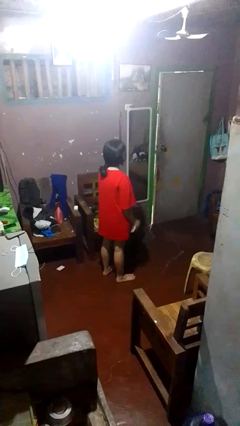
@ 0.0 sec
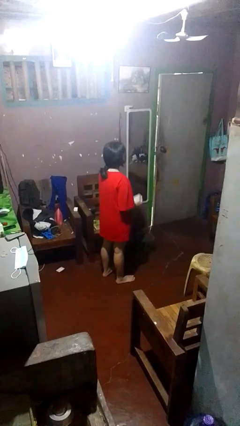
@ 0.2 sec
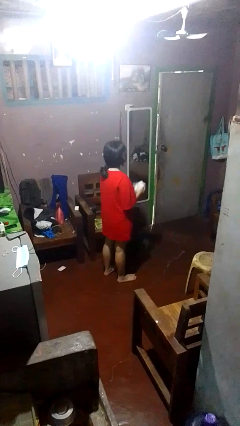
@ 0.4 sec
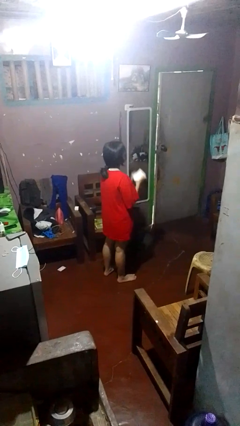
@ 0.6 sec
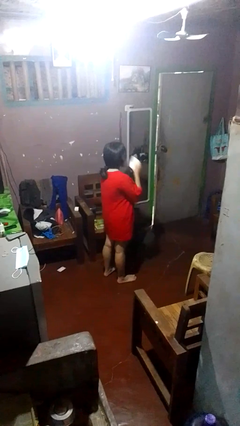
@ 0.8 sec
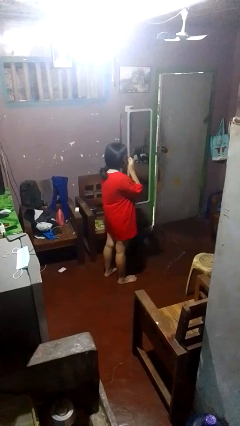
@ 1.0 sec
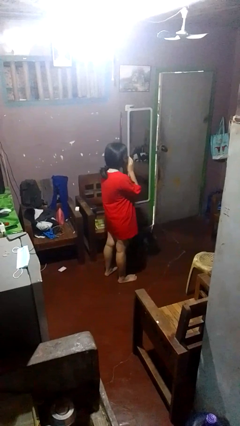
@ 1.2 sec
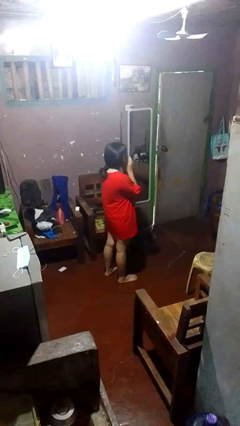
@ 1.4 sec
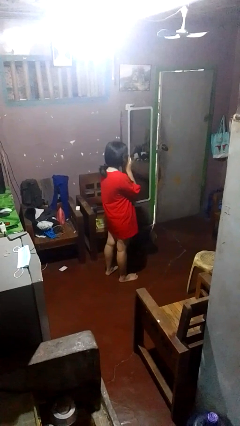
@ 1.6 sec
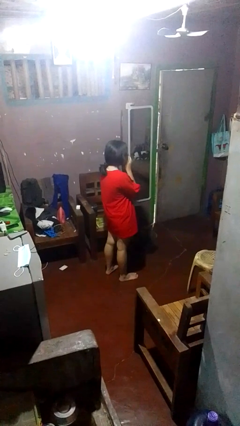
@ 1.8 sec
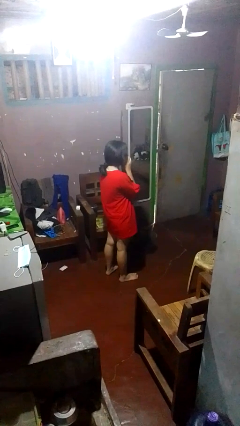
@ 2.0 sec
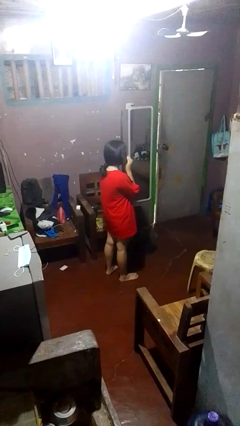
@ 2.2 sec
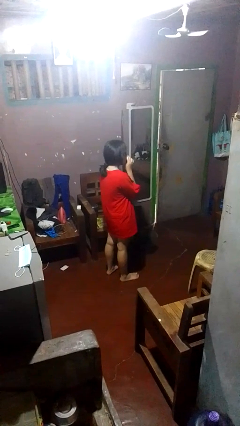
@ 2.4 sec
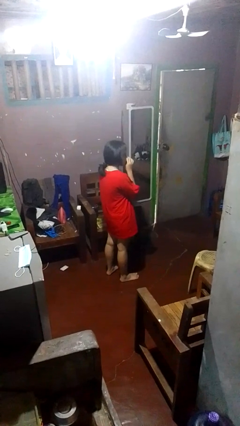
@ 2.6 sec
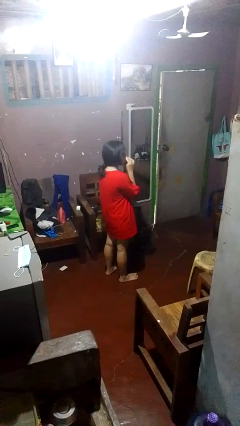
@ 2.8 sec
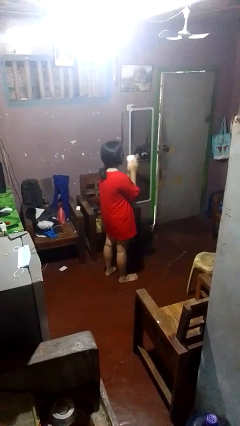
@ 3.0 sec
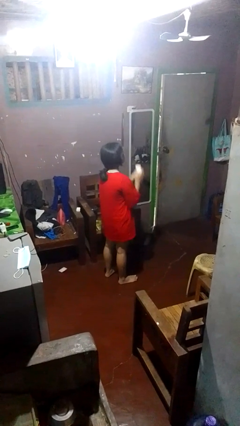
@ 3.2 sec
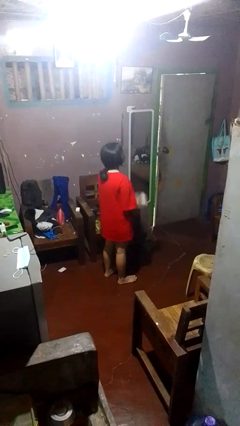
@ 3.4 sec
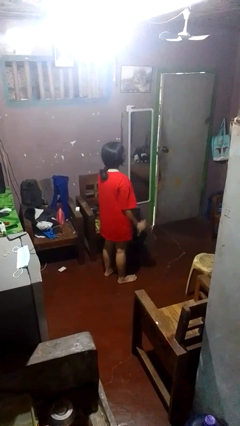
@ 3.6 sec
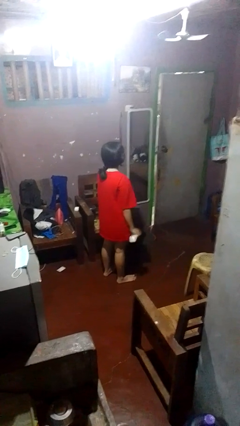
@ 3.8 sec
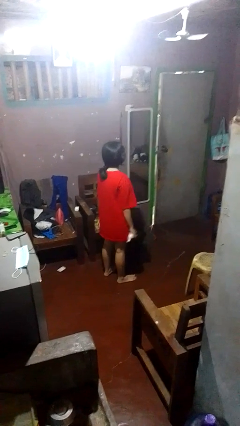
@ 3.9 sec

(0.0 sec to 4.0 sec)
person blows nose

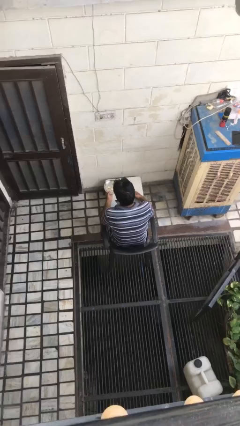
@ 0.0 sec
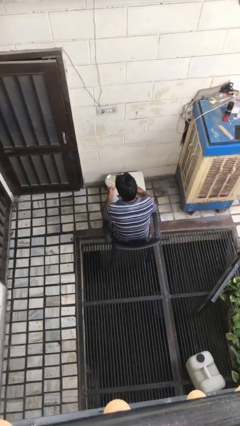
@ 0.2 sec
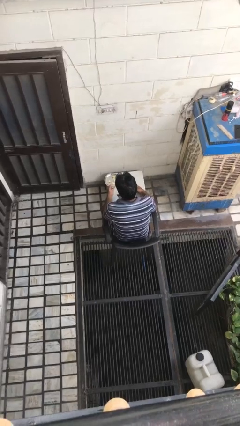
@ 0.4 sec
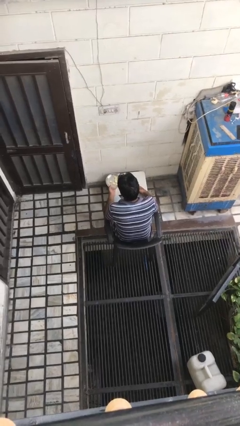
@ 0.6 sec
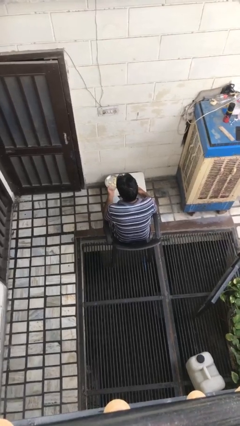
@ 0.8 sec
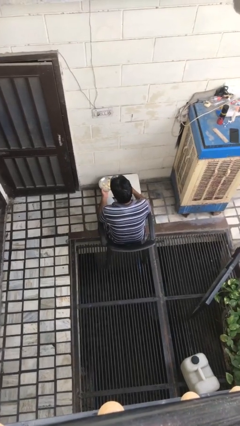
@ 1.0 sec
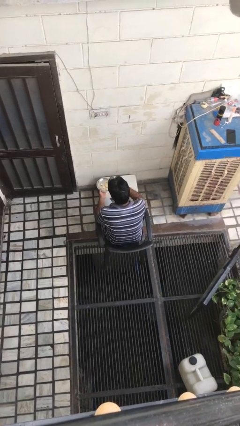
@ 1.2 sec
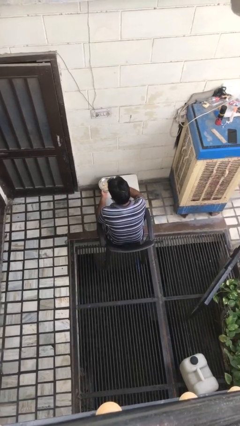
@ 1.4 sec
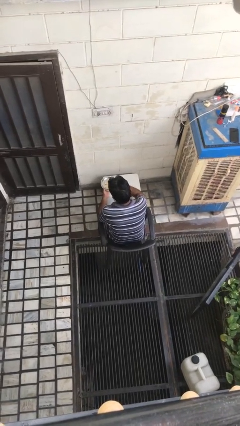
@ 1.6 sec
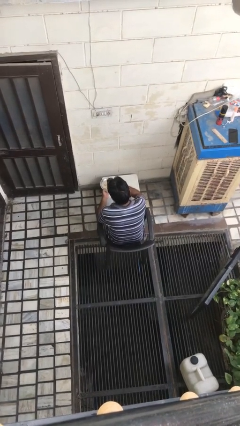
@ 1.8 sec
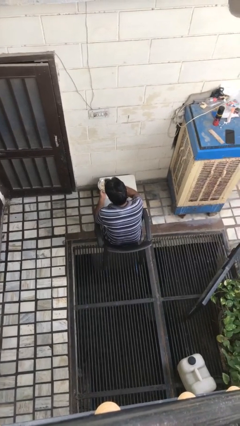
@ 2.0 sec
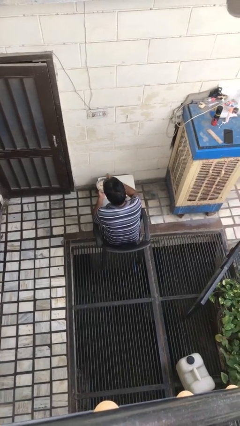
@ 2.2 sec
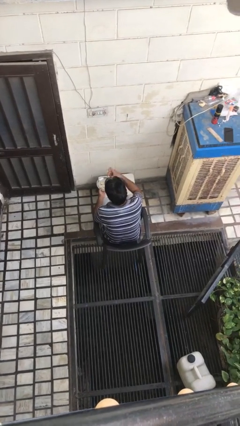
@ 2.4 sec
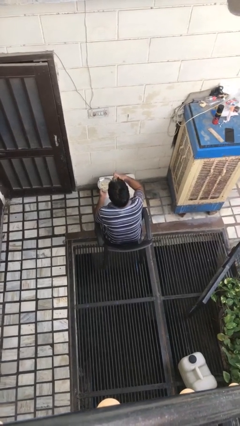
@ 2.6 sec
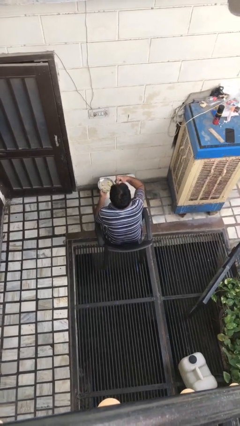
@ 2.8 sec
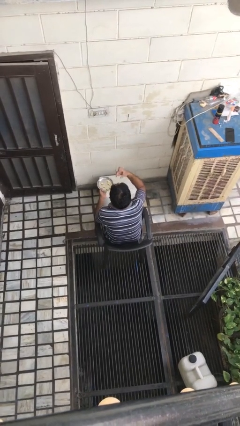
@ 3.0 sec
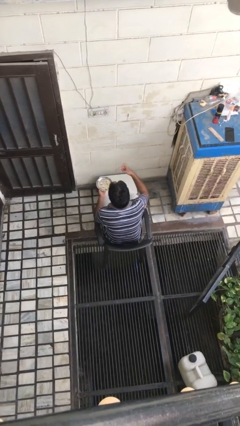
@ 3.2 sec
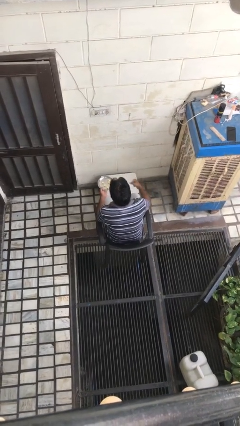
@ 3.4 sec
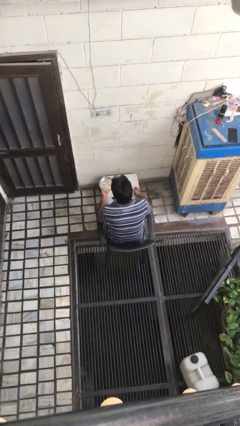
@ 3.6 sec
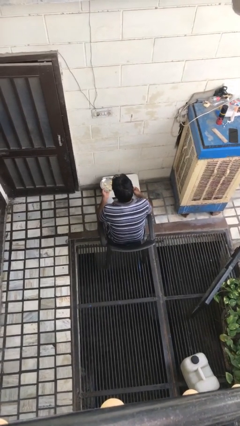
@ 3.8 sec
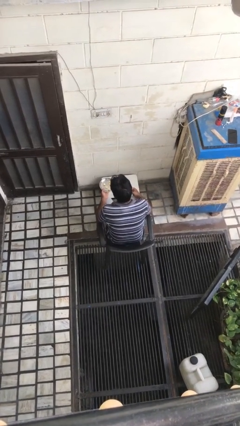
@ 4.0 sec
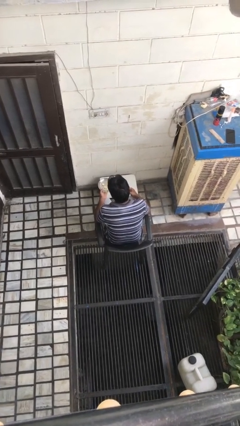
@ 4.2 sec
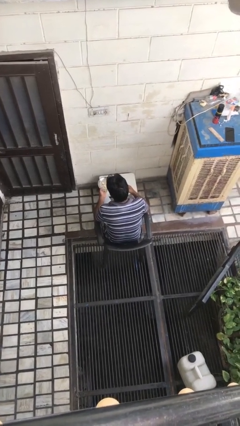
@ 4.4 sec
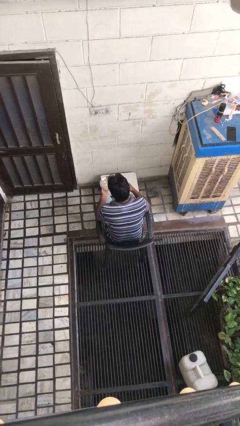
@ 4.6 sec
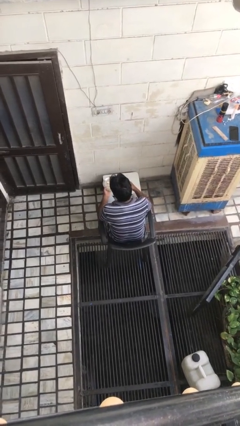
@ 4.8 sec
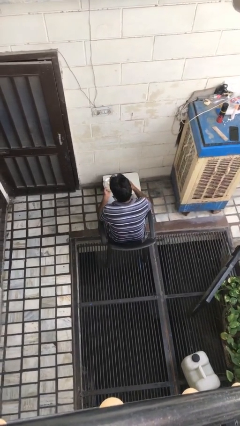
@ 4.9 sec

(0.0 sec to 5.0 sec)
person eats with hands

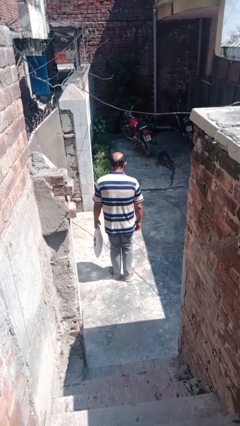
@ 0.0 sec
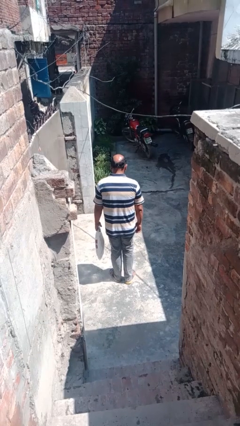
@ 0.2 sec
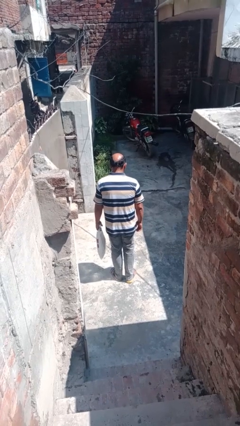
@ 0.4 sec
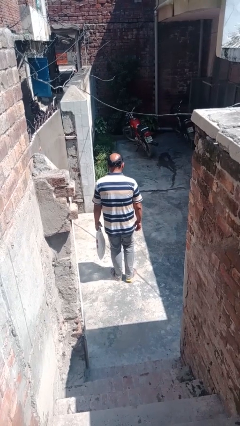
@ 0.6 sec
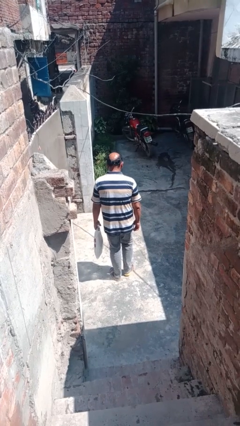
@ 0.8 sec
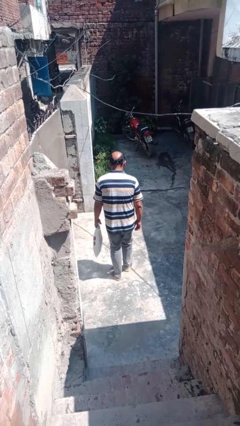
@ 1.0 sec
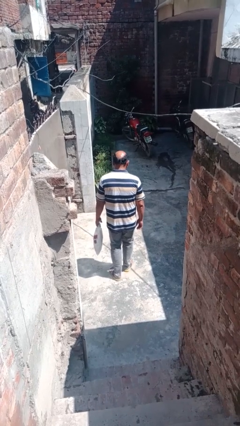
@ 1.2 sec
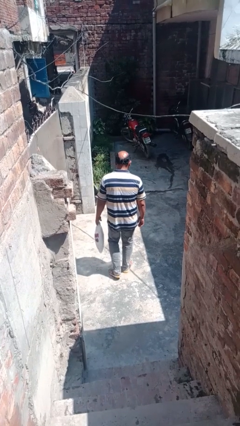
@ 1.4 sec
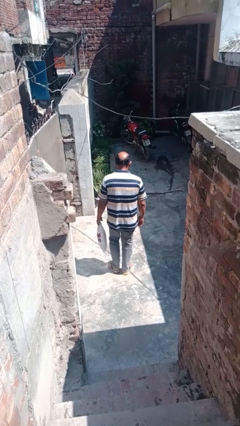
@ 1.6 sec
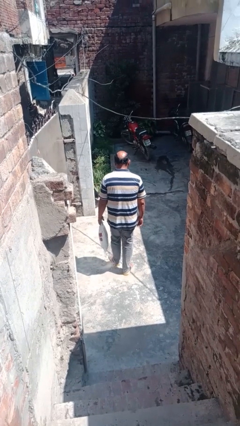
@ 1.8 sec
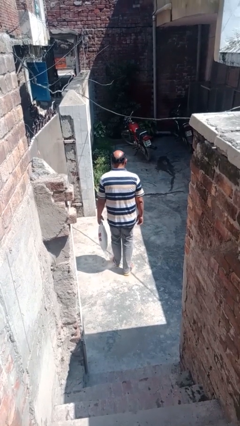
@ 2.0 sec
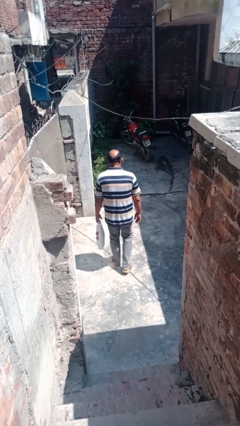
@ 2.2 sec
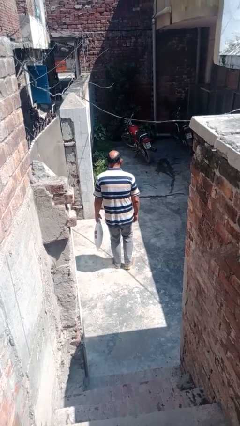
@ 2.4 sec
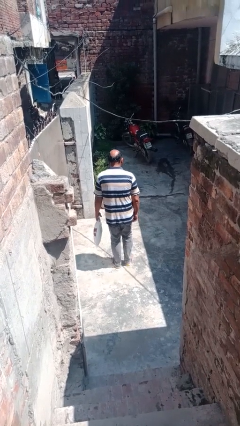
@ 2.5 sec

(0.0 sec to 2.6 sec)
person carries groceries

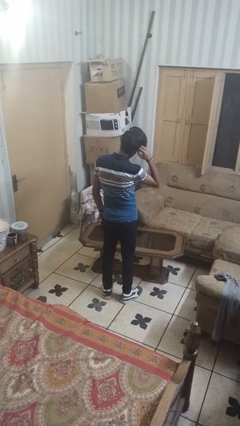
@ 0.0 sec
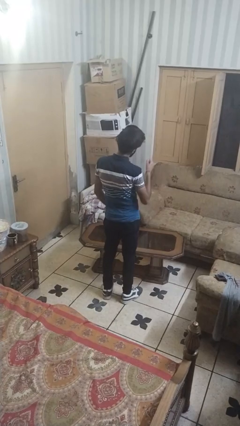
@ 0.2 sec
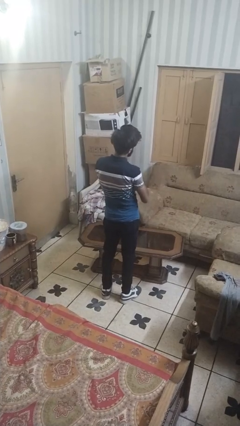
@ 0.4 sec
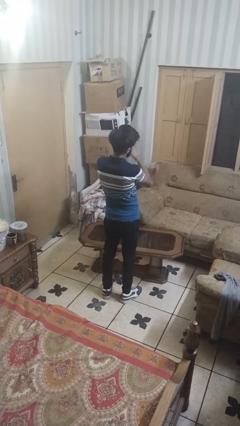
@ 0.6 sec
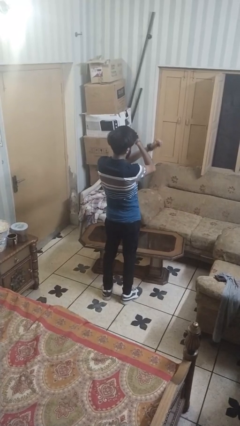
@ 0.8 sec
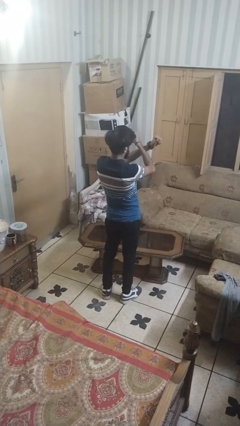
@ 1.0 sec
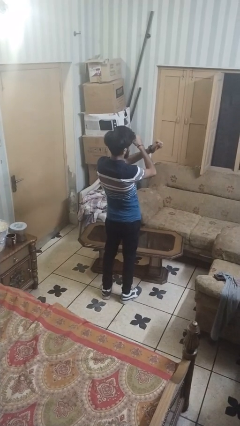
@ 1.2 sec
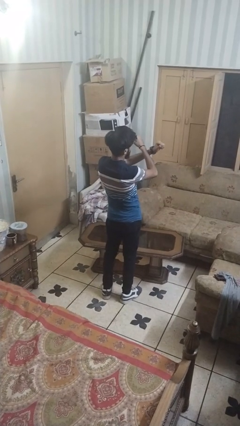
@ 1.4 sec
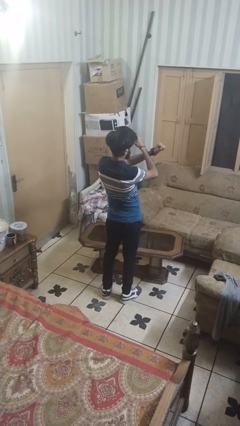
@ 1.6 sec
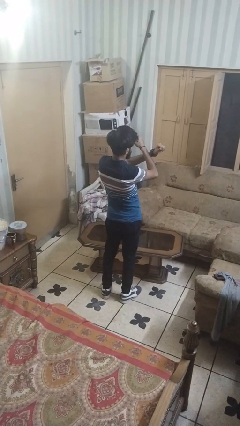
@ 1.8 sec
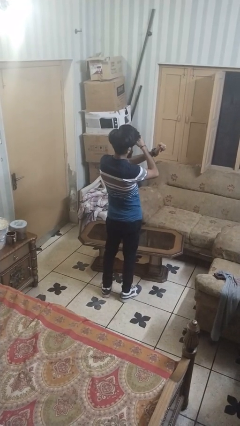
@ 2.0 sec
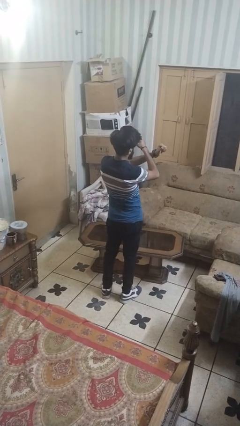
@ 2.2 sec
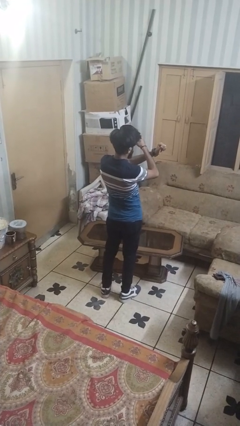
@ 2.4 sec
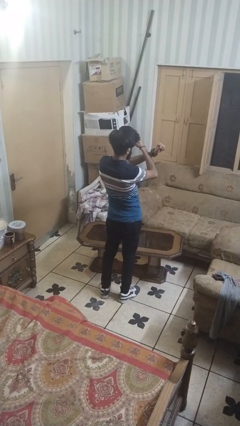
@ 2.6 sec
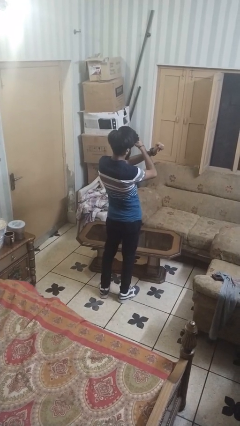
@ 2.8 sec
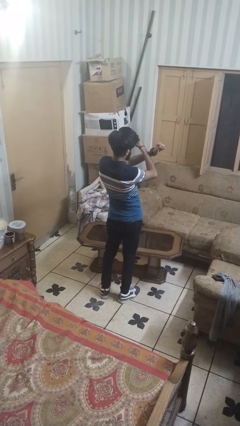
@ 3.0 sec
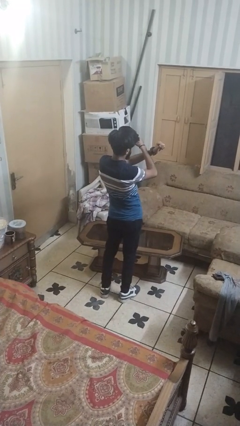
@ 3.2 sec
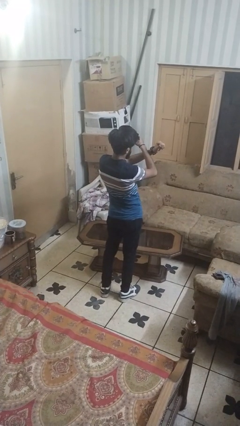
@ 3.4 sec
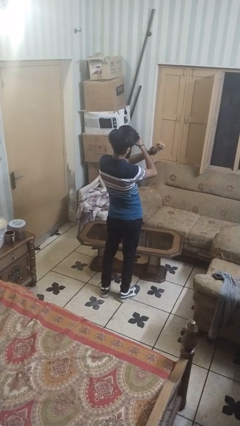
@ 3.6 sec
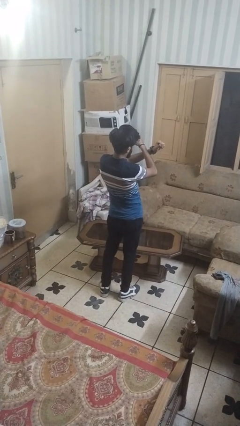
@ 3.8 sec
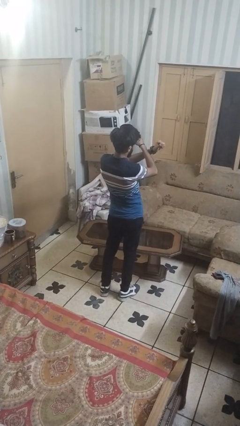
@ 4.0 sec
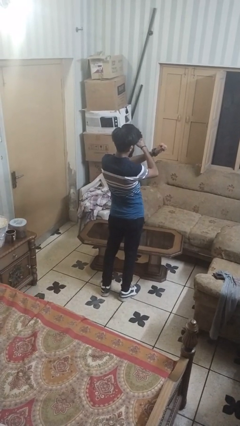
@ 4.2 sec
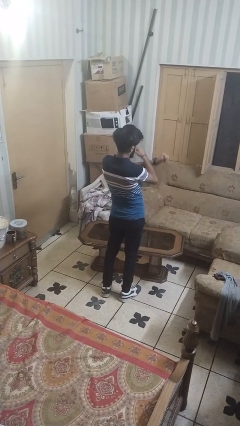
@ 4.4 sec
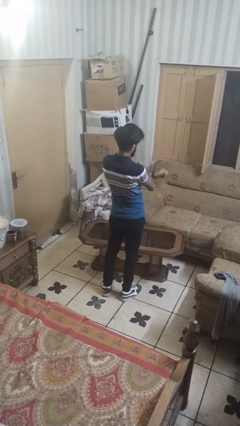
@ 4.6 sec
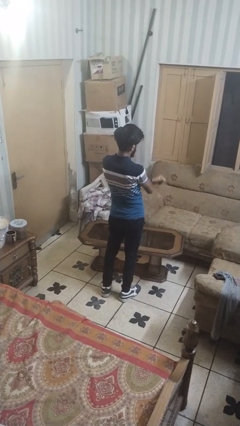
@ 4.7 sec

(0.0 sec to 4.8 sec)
person gestures arms x

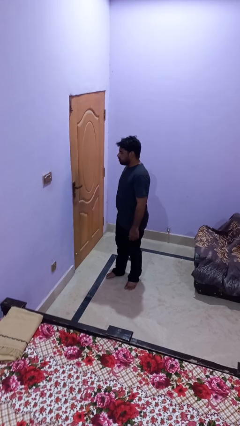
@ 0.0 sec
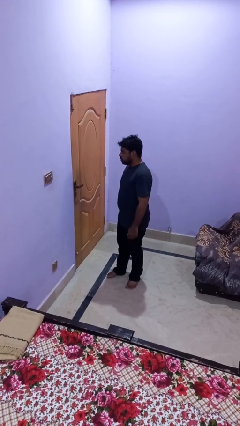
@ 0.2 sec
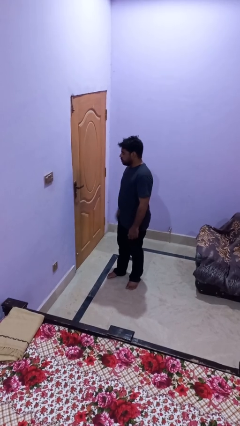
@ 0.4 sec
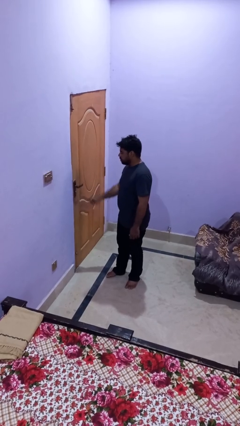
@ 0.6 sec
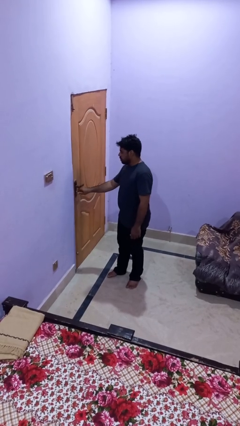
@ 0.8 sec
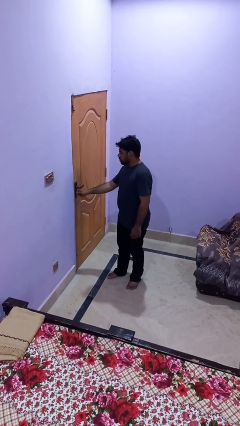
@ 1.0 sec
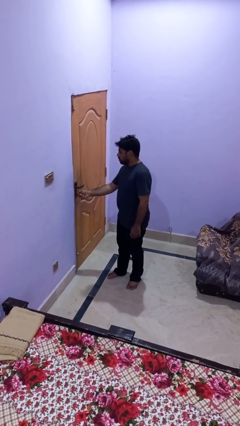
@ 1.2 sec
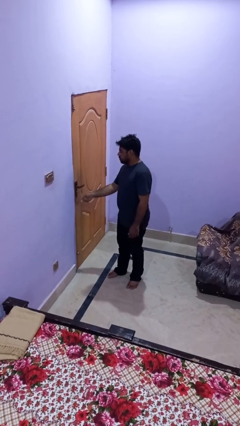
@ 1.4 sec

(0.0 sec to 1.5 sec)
person unlocks door with keys
